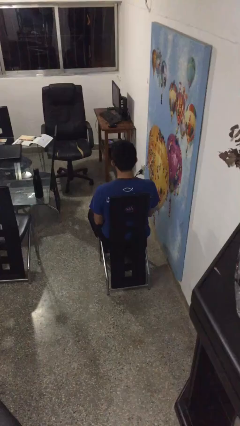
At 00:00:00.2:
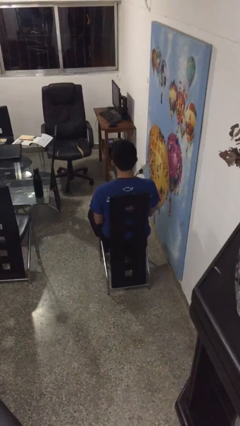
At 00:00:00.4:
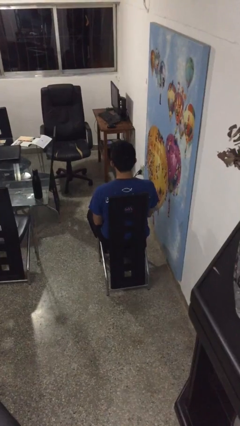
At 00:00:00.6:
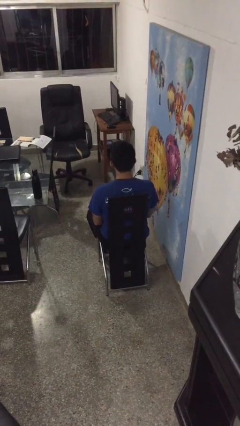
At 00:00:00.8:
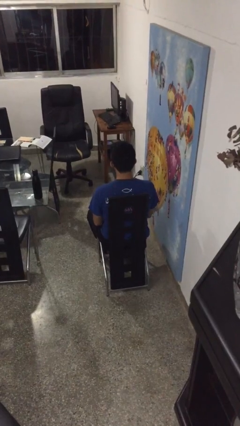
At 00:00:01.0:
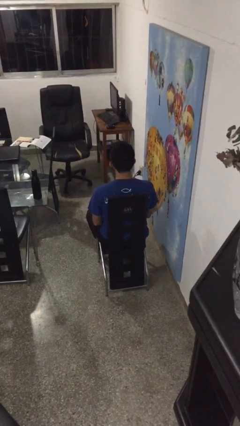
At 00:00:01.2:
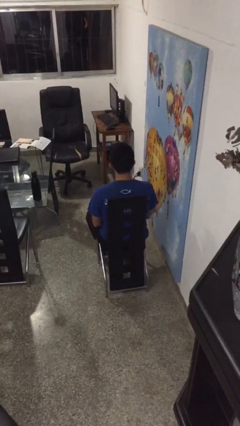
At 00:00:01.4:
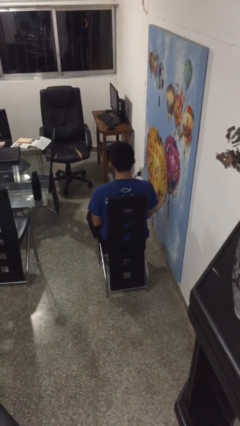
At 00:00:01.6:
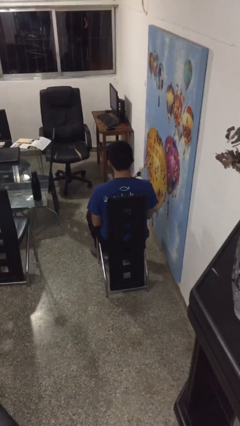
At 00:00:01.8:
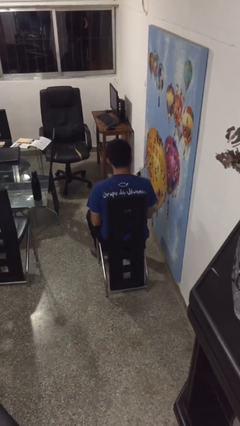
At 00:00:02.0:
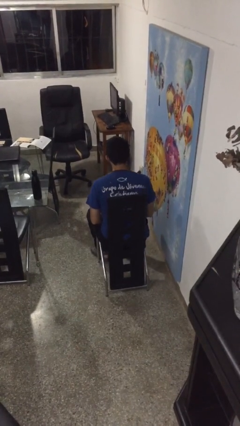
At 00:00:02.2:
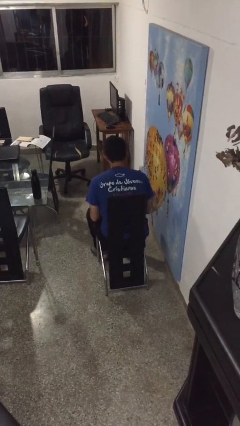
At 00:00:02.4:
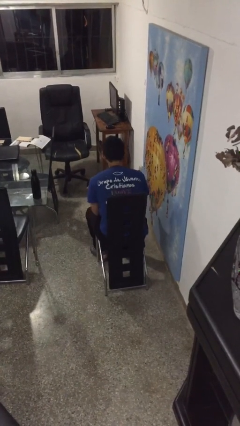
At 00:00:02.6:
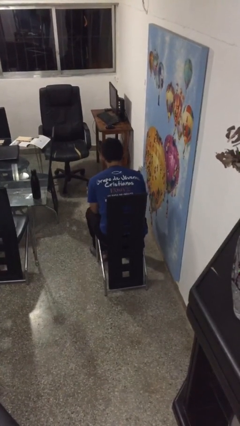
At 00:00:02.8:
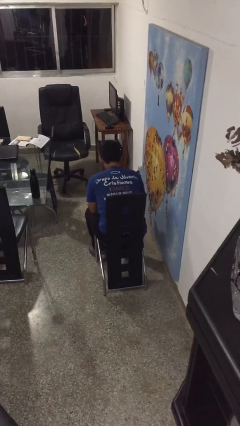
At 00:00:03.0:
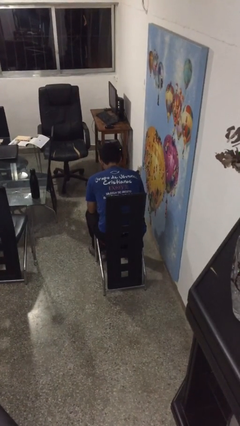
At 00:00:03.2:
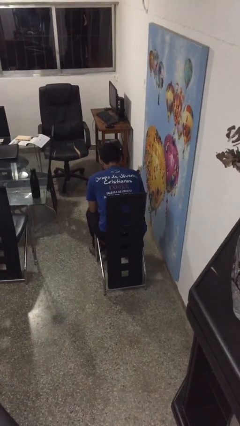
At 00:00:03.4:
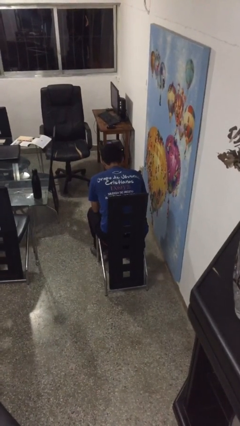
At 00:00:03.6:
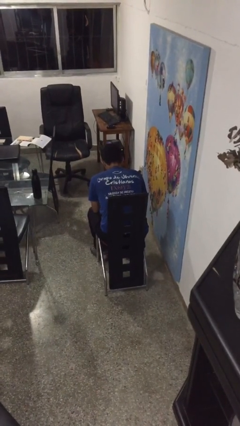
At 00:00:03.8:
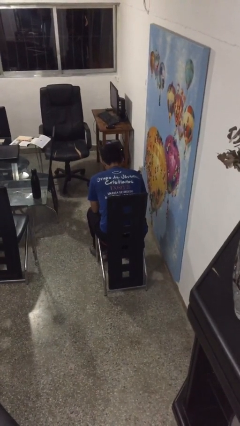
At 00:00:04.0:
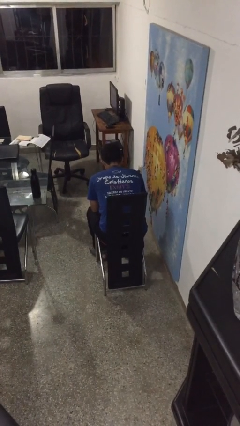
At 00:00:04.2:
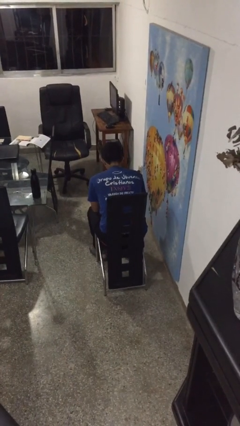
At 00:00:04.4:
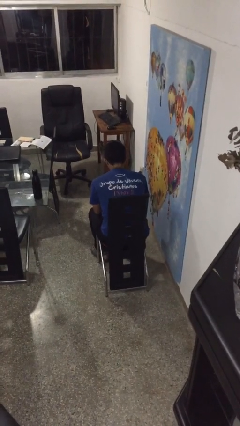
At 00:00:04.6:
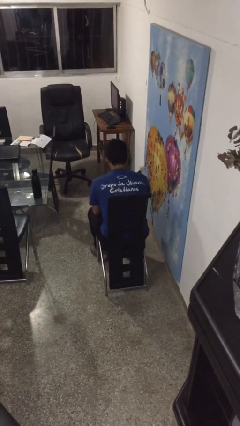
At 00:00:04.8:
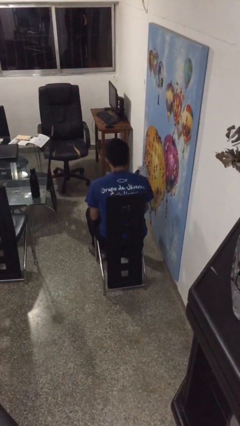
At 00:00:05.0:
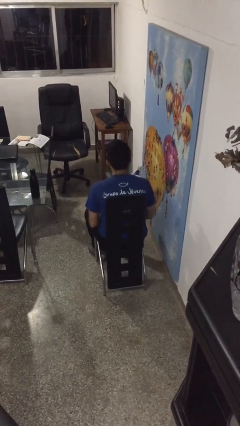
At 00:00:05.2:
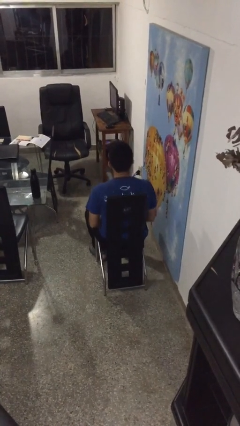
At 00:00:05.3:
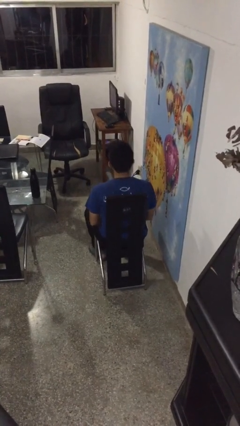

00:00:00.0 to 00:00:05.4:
person looks at hands in lap

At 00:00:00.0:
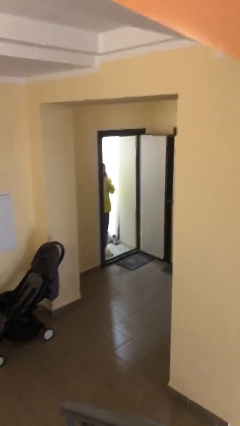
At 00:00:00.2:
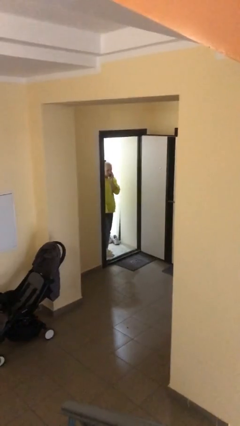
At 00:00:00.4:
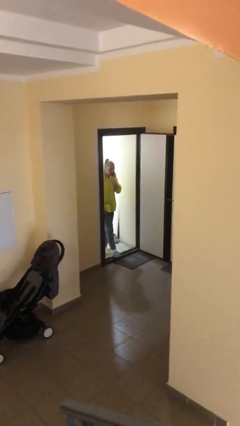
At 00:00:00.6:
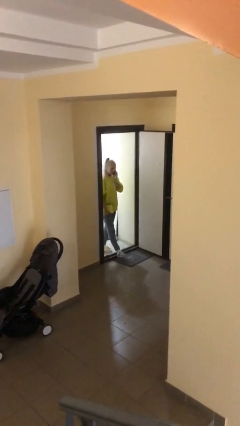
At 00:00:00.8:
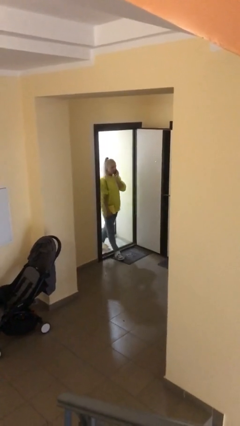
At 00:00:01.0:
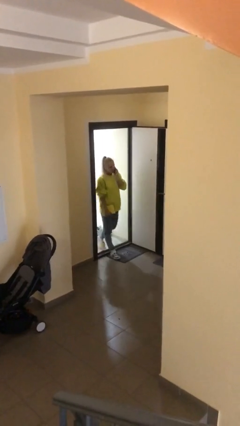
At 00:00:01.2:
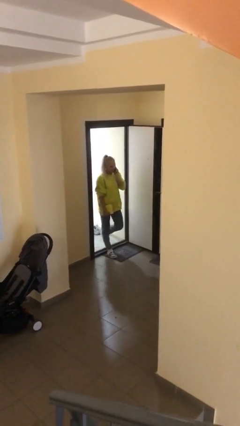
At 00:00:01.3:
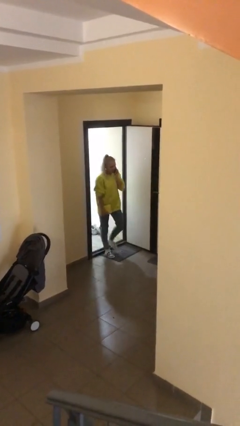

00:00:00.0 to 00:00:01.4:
person enters scene through structure

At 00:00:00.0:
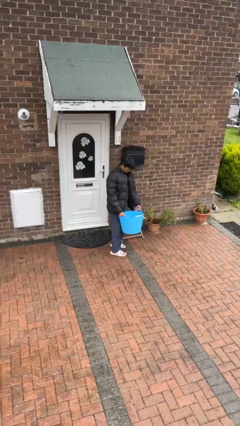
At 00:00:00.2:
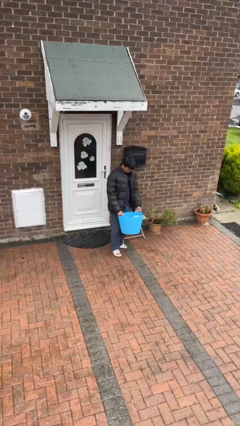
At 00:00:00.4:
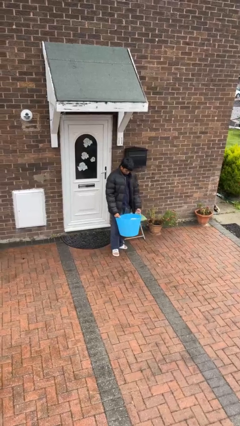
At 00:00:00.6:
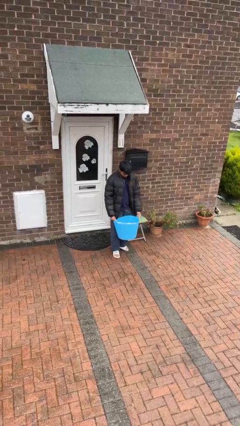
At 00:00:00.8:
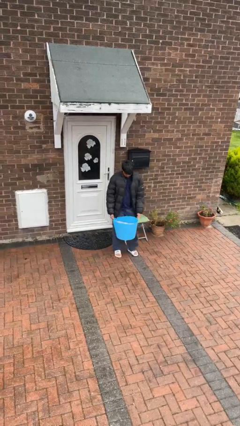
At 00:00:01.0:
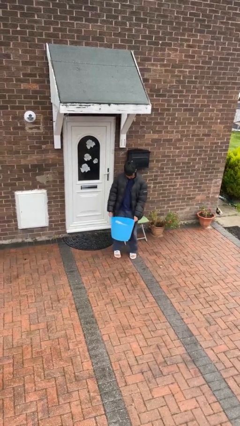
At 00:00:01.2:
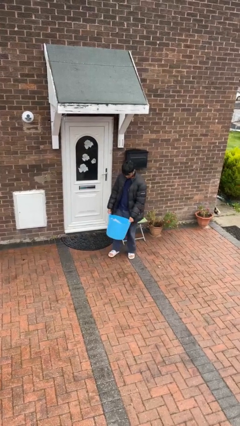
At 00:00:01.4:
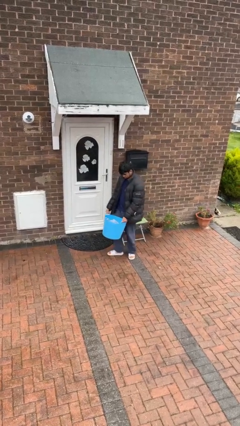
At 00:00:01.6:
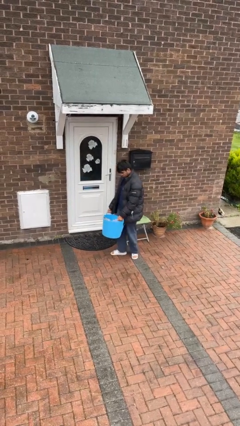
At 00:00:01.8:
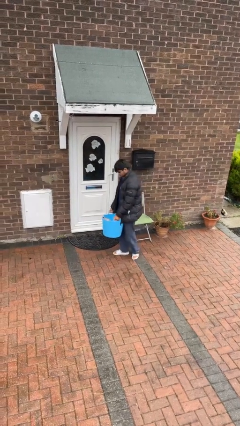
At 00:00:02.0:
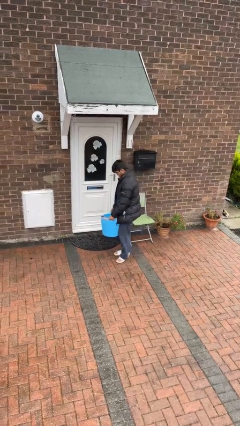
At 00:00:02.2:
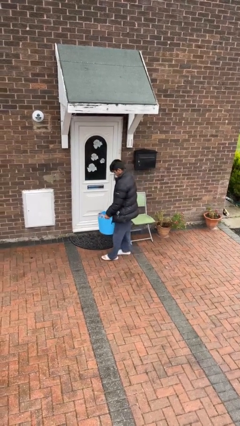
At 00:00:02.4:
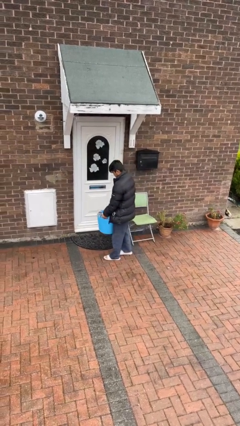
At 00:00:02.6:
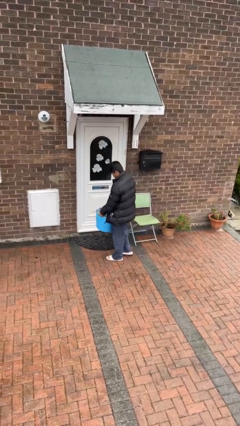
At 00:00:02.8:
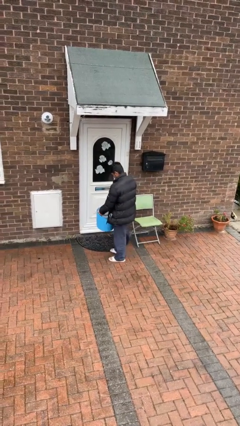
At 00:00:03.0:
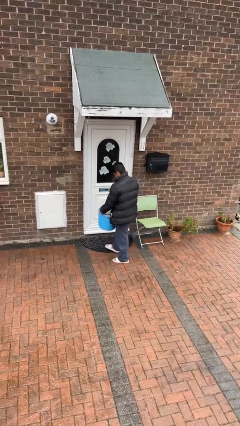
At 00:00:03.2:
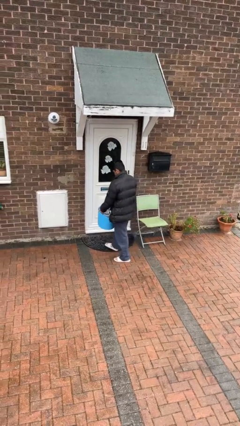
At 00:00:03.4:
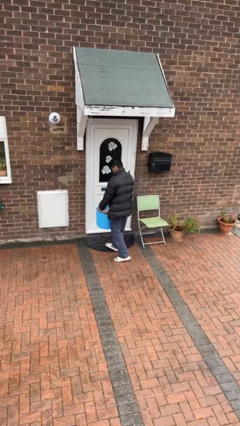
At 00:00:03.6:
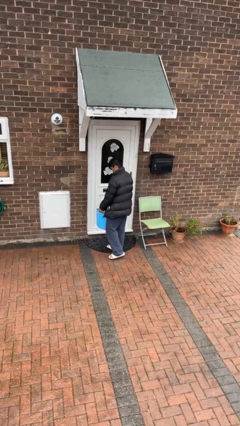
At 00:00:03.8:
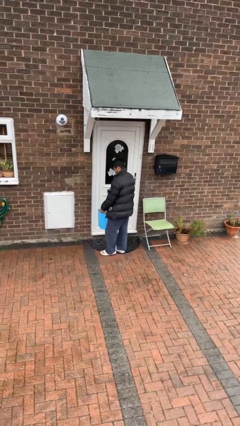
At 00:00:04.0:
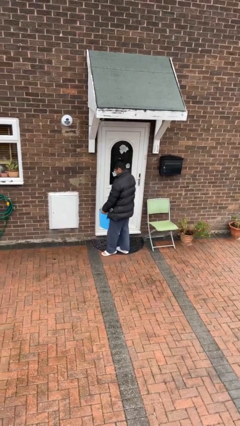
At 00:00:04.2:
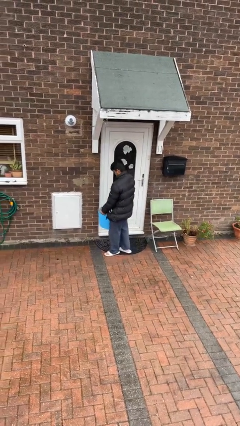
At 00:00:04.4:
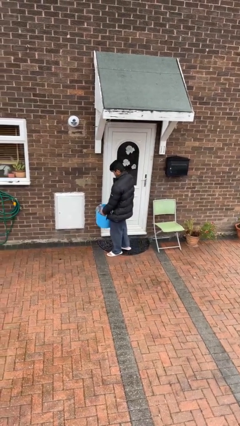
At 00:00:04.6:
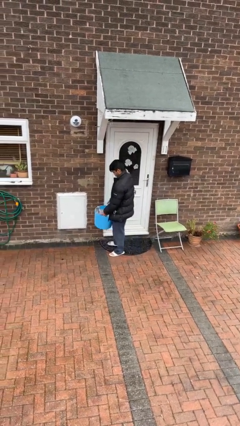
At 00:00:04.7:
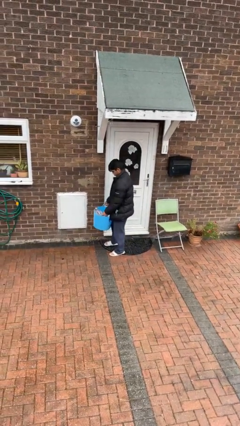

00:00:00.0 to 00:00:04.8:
person carries laundry basket

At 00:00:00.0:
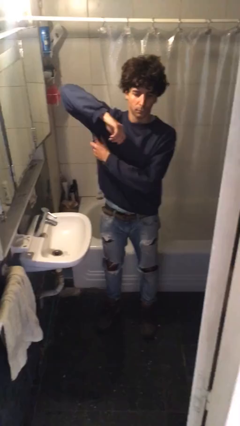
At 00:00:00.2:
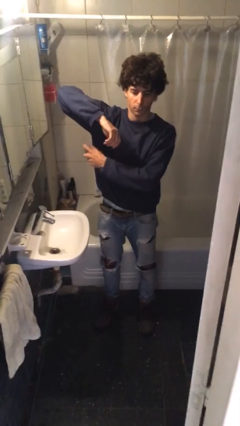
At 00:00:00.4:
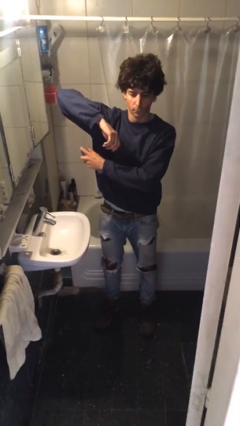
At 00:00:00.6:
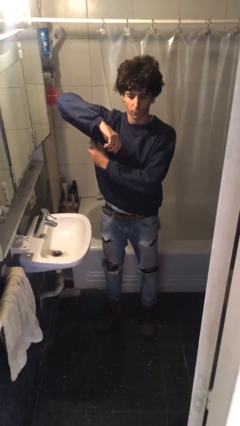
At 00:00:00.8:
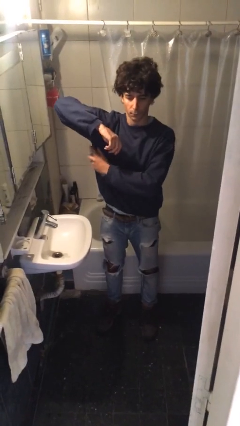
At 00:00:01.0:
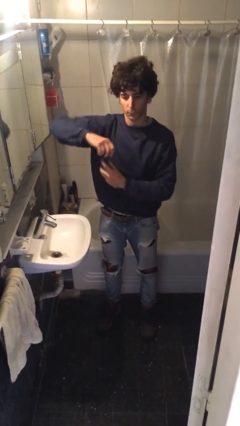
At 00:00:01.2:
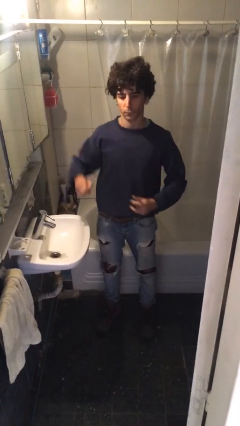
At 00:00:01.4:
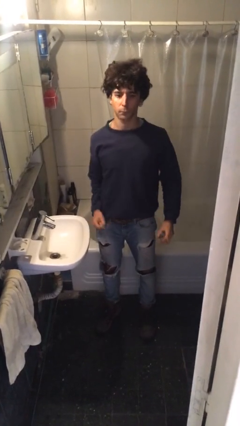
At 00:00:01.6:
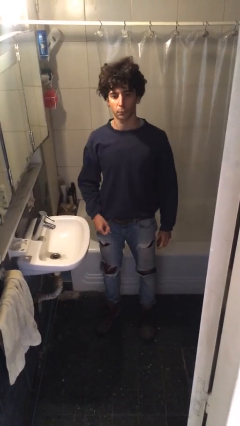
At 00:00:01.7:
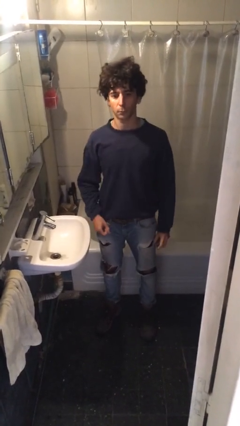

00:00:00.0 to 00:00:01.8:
person applies deodorant

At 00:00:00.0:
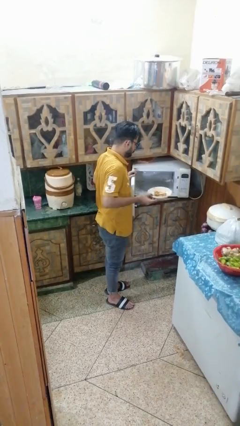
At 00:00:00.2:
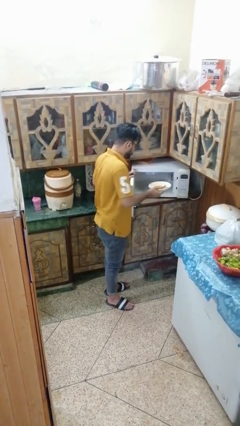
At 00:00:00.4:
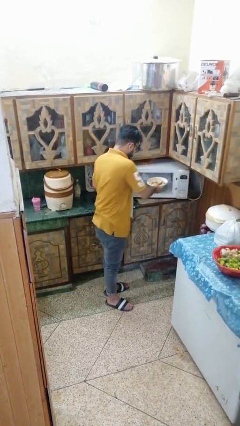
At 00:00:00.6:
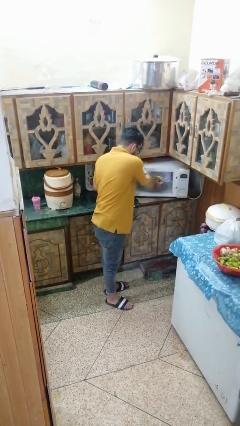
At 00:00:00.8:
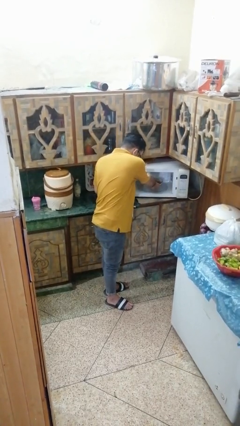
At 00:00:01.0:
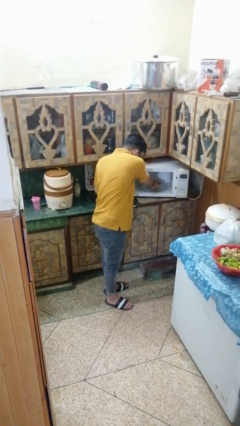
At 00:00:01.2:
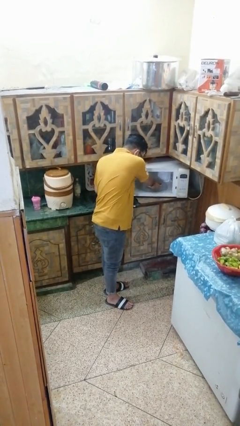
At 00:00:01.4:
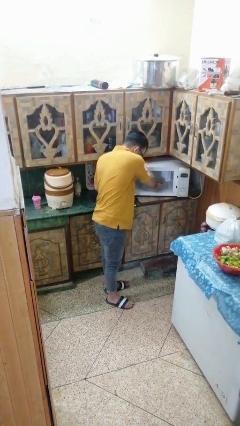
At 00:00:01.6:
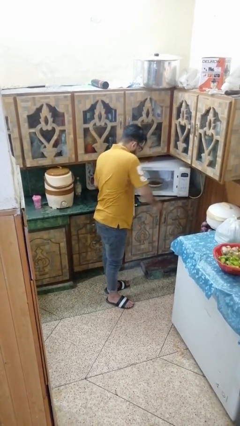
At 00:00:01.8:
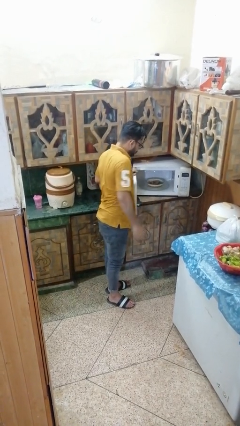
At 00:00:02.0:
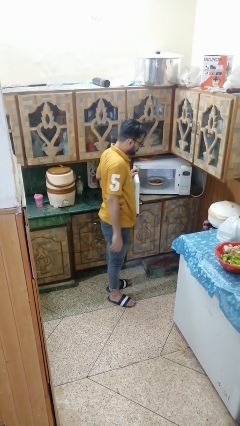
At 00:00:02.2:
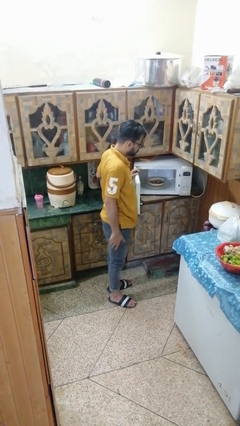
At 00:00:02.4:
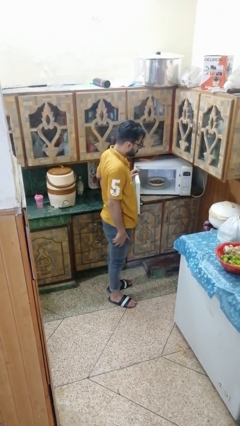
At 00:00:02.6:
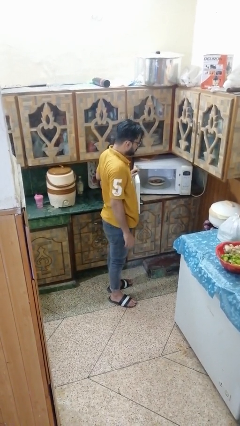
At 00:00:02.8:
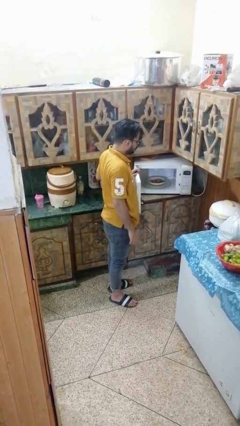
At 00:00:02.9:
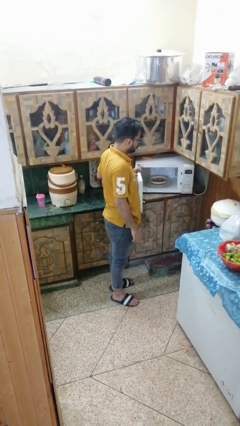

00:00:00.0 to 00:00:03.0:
person puts object into microwave

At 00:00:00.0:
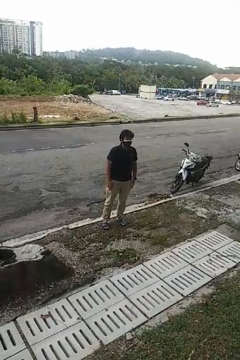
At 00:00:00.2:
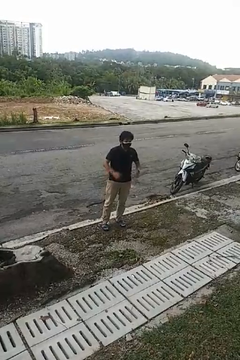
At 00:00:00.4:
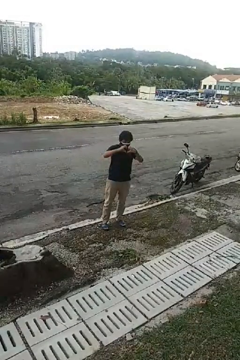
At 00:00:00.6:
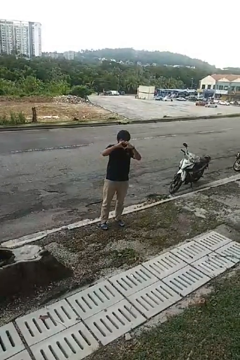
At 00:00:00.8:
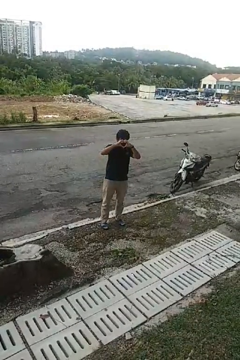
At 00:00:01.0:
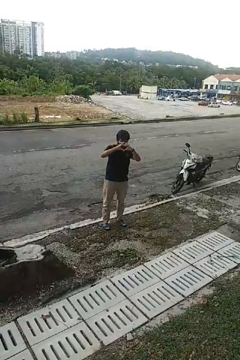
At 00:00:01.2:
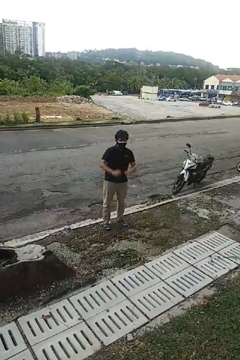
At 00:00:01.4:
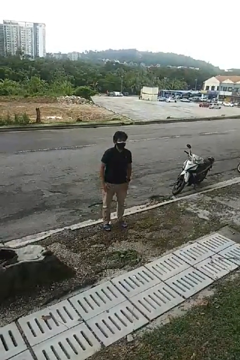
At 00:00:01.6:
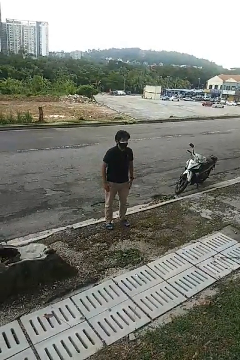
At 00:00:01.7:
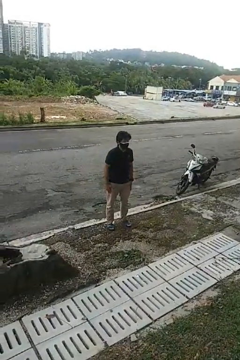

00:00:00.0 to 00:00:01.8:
person gestures heart
